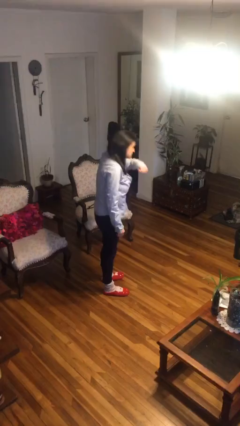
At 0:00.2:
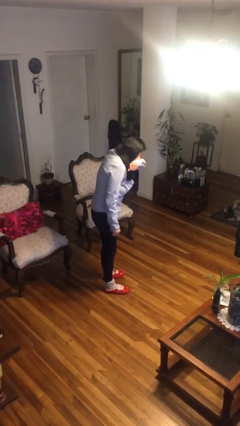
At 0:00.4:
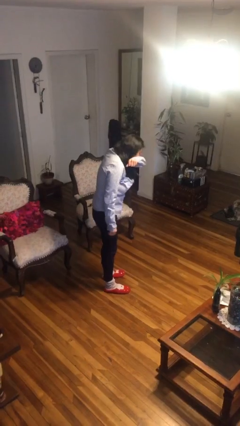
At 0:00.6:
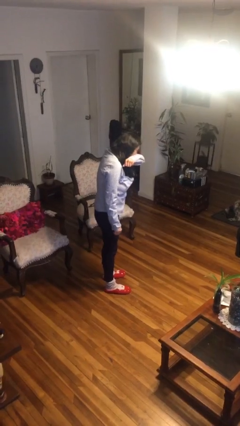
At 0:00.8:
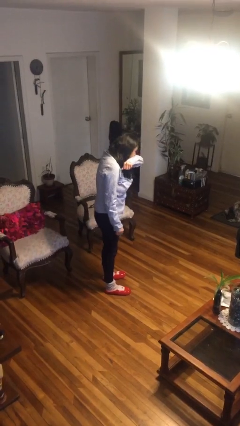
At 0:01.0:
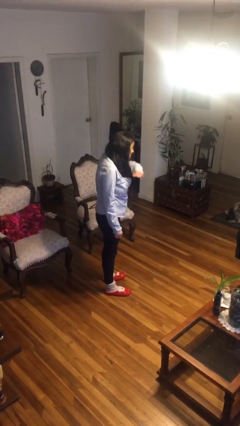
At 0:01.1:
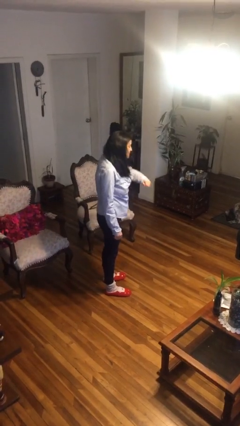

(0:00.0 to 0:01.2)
person sneezes into arm

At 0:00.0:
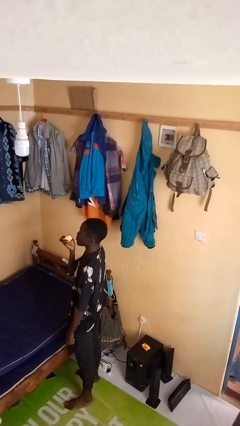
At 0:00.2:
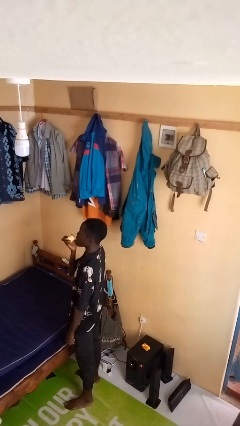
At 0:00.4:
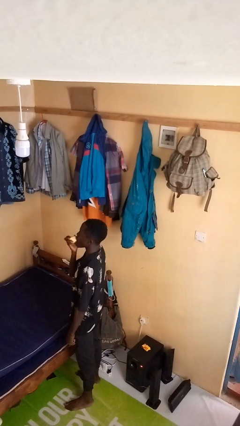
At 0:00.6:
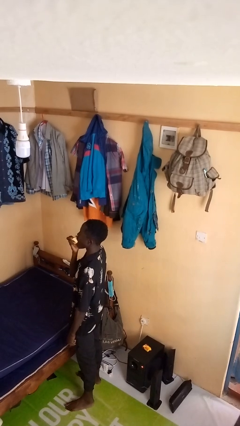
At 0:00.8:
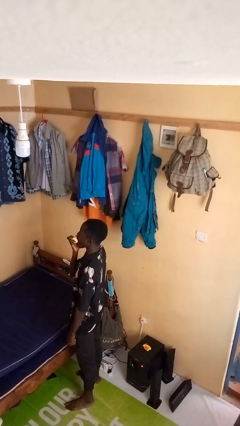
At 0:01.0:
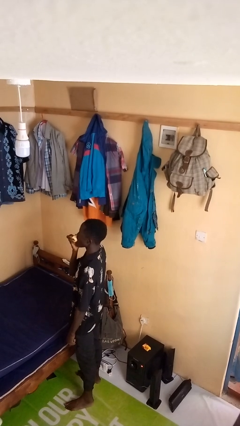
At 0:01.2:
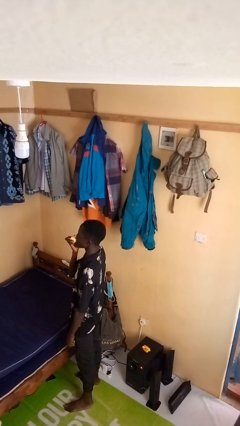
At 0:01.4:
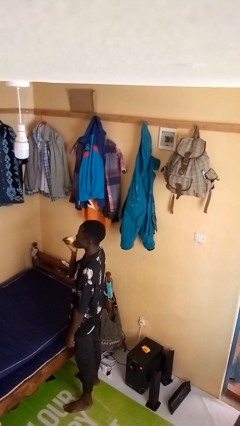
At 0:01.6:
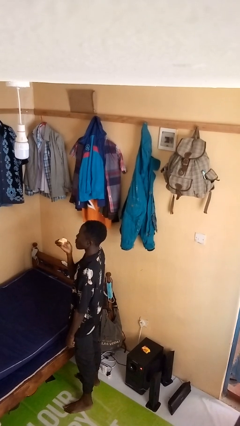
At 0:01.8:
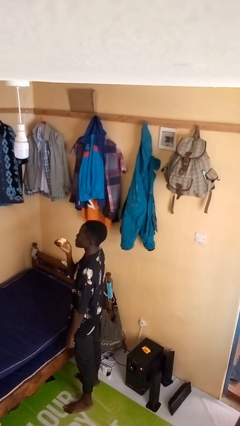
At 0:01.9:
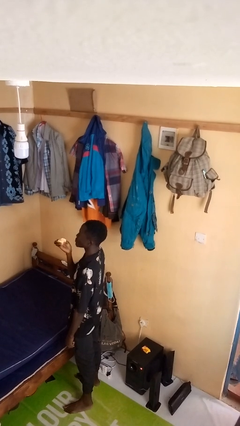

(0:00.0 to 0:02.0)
person eats apple

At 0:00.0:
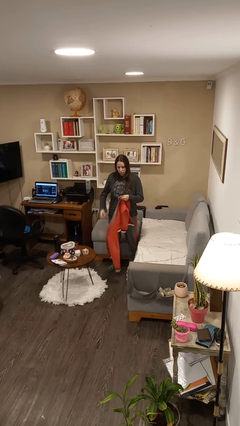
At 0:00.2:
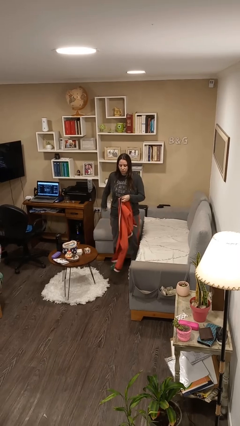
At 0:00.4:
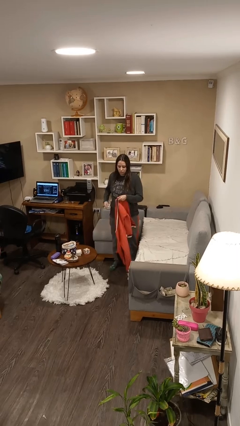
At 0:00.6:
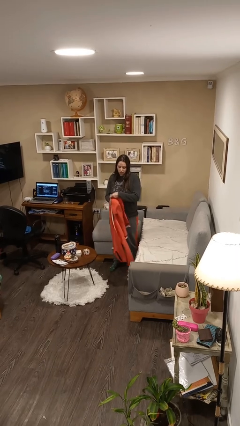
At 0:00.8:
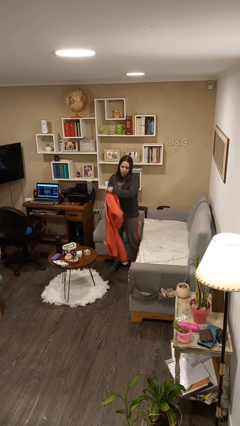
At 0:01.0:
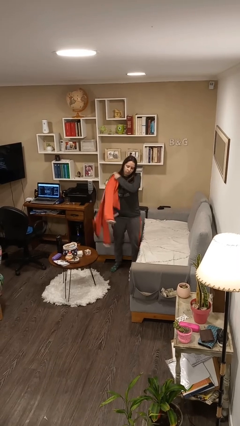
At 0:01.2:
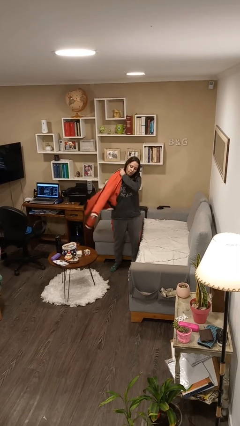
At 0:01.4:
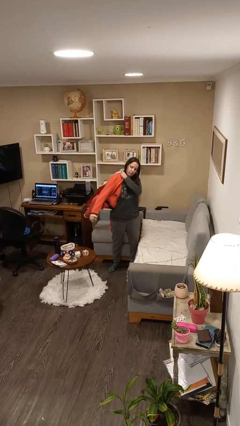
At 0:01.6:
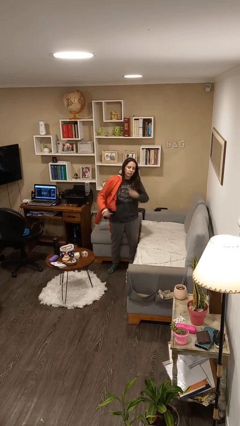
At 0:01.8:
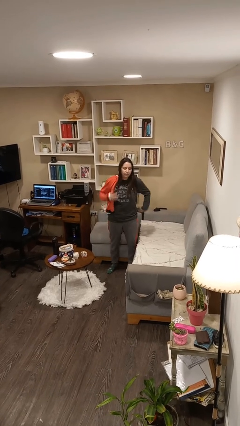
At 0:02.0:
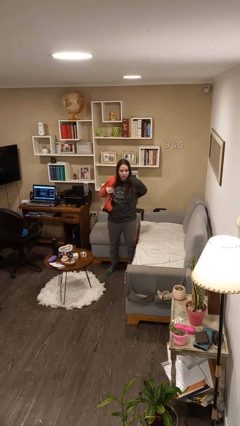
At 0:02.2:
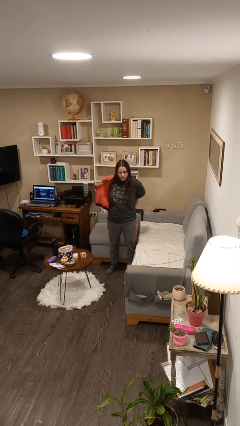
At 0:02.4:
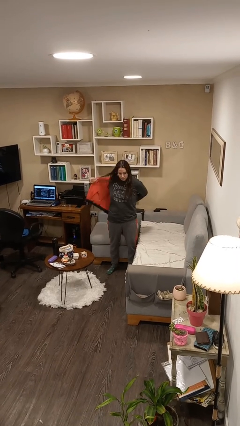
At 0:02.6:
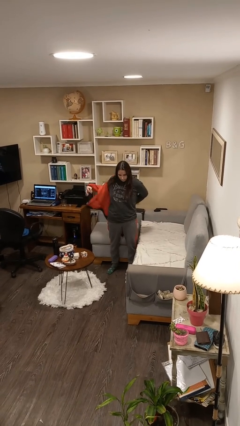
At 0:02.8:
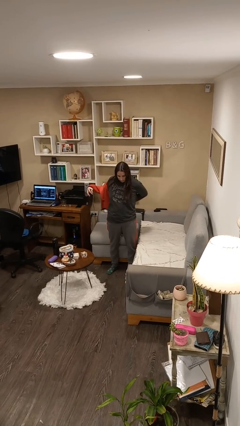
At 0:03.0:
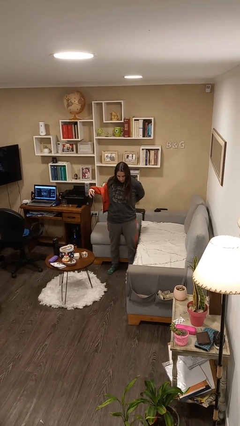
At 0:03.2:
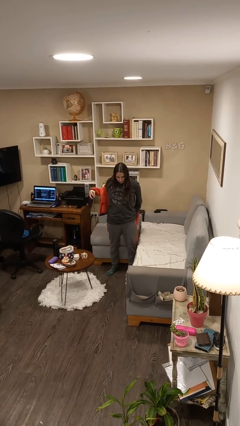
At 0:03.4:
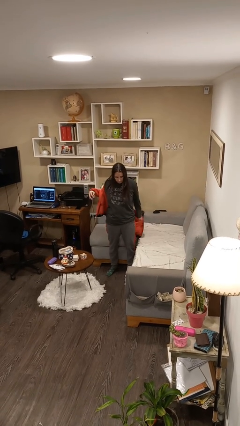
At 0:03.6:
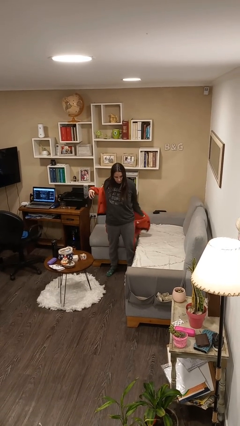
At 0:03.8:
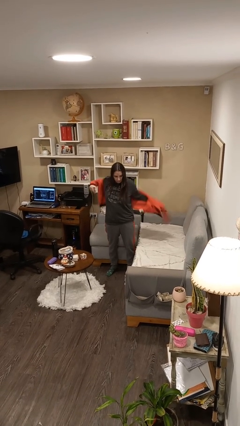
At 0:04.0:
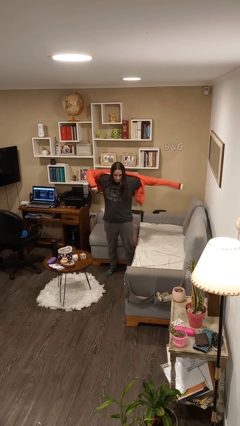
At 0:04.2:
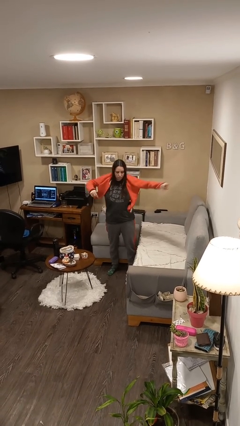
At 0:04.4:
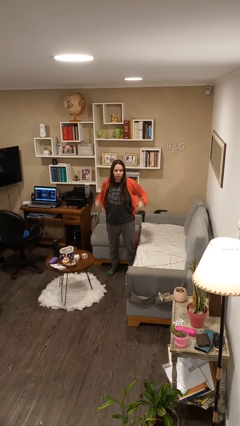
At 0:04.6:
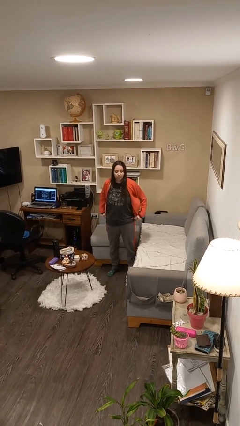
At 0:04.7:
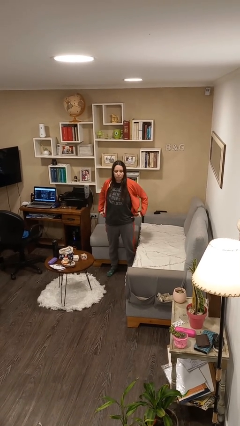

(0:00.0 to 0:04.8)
person puts on jacket

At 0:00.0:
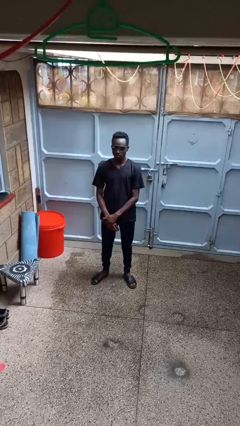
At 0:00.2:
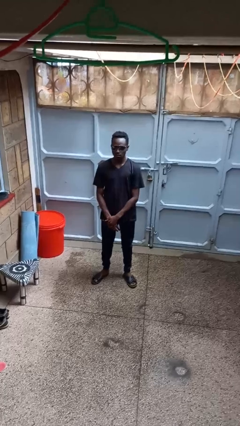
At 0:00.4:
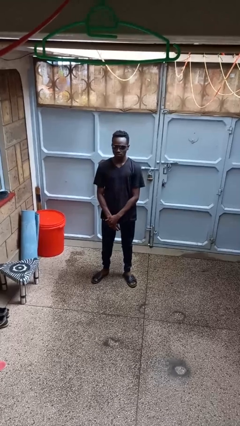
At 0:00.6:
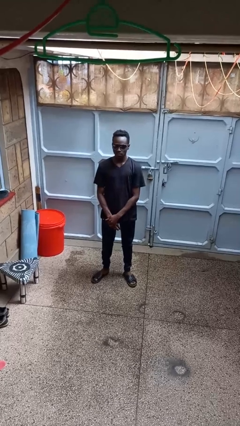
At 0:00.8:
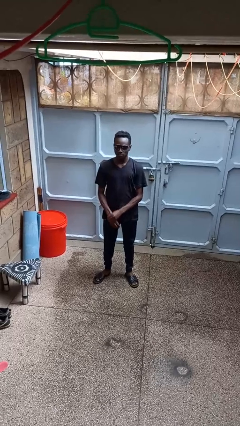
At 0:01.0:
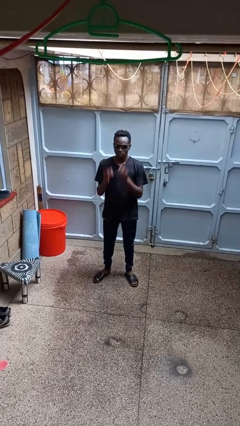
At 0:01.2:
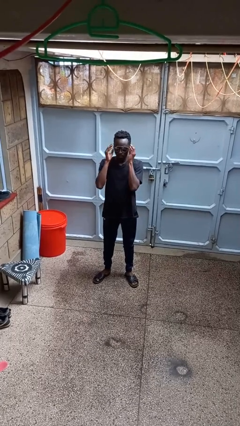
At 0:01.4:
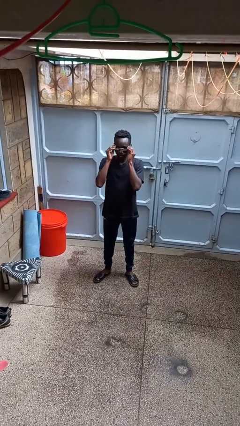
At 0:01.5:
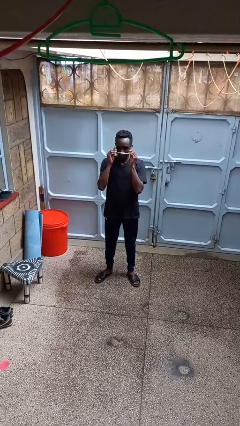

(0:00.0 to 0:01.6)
person takes off sunglasses

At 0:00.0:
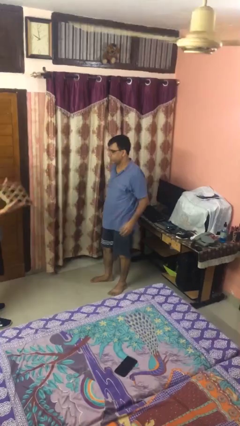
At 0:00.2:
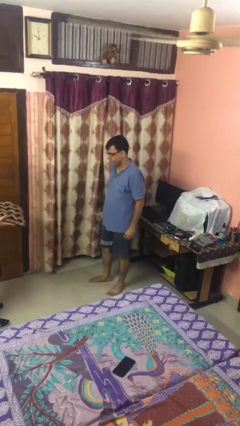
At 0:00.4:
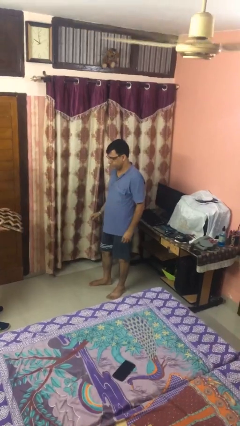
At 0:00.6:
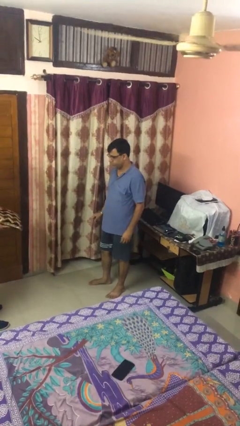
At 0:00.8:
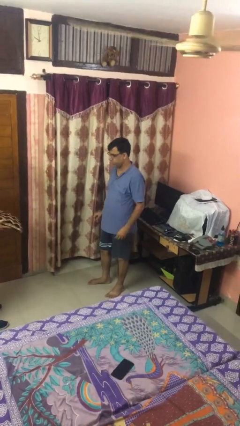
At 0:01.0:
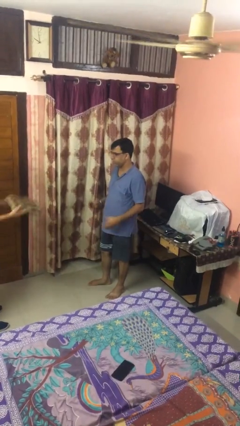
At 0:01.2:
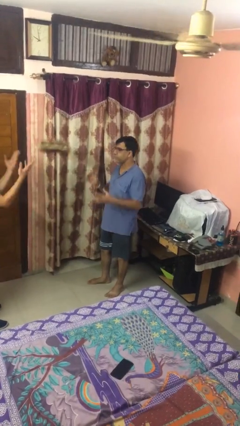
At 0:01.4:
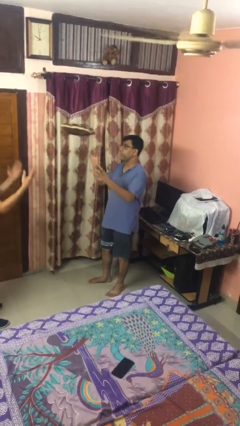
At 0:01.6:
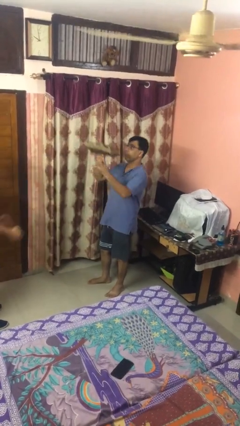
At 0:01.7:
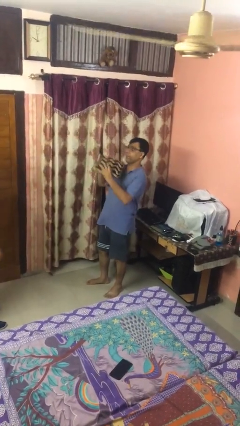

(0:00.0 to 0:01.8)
person catches object from person

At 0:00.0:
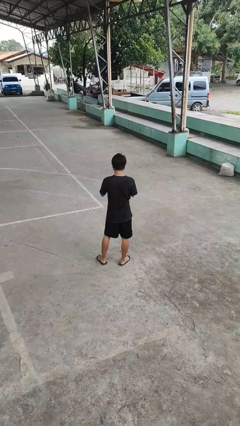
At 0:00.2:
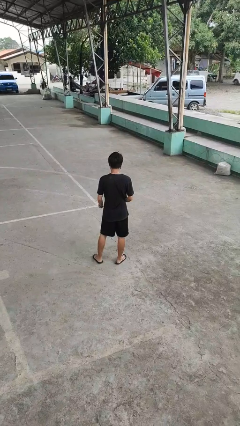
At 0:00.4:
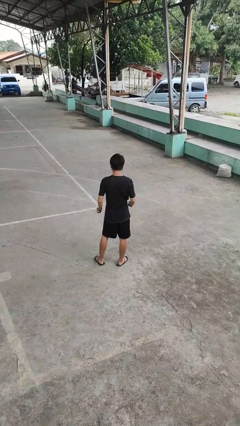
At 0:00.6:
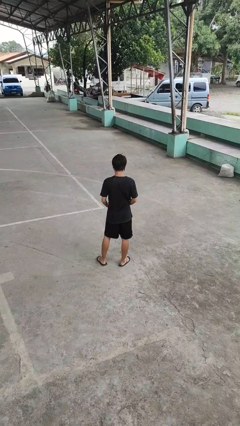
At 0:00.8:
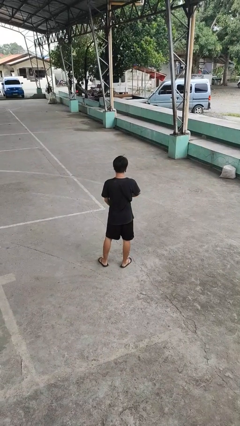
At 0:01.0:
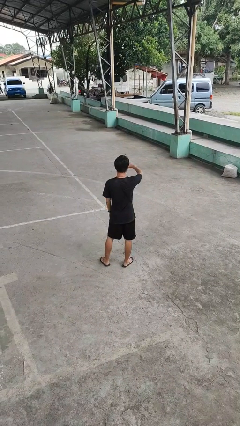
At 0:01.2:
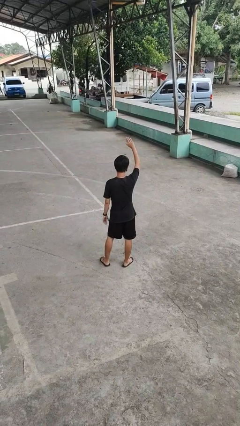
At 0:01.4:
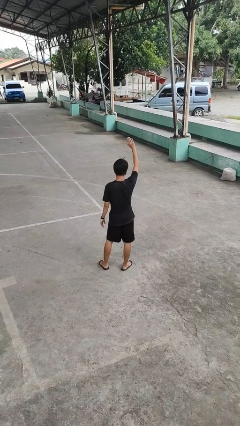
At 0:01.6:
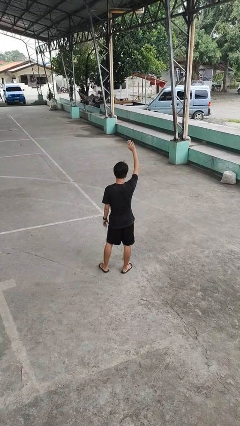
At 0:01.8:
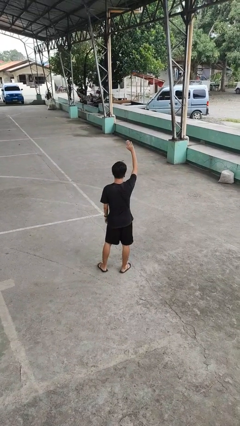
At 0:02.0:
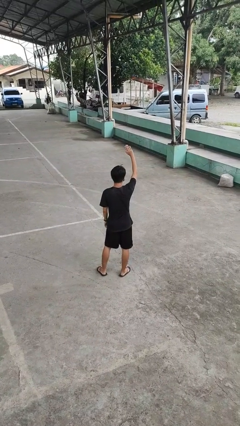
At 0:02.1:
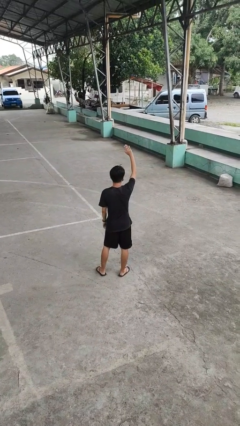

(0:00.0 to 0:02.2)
person gestures swipe up

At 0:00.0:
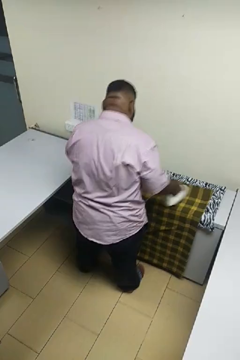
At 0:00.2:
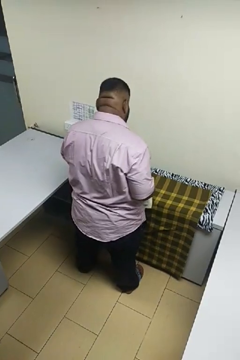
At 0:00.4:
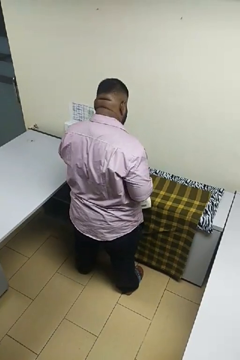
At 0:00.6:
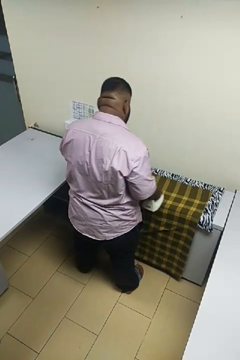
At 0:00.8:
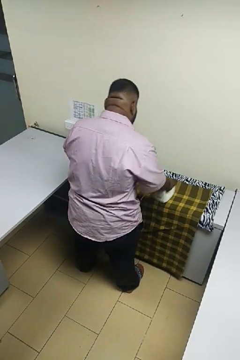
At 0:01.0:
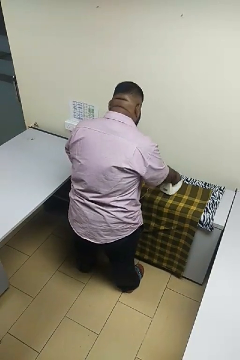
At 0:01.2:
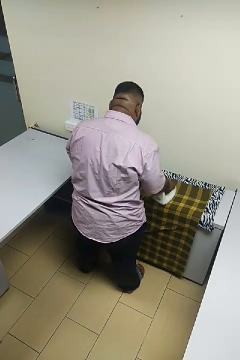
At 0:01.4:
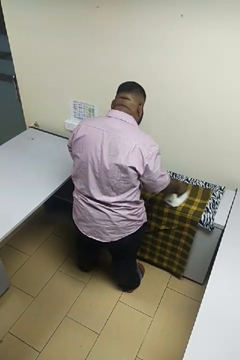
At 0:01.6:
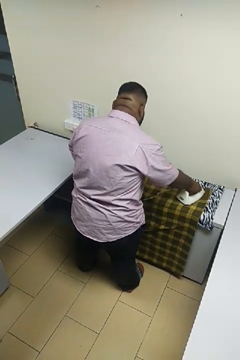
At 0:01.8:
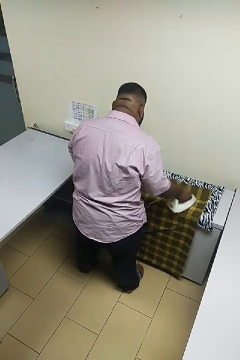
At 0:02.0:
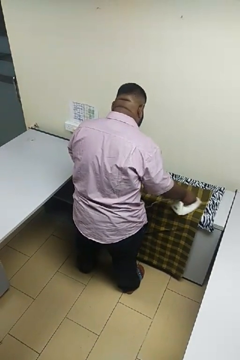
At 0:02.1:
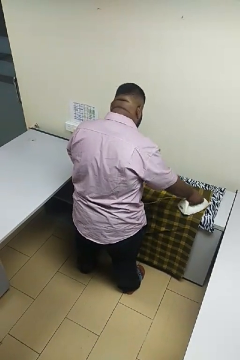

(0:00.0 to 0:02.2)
person irons clothes

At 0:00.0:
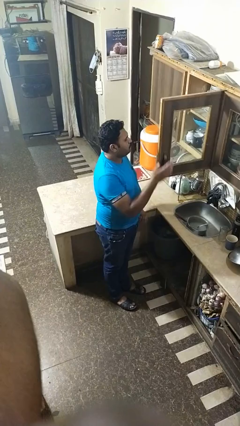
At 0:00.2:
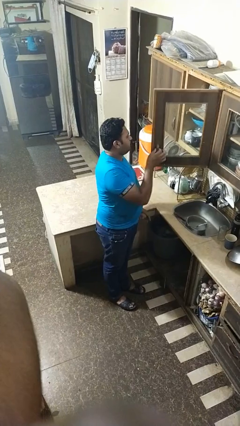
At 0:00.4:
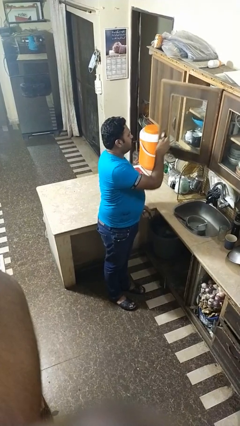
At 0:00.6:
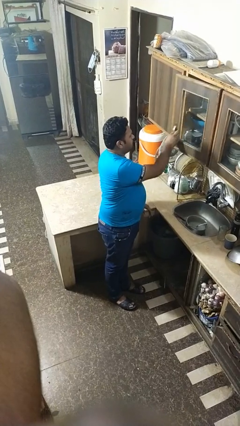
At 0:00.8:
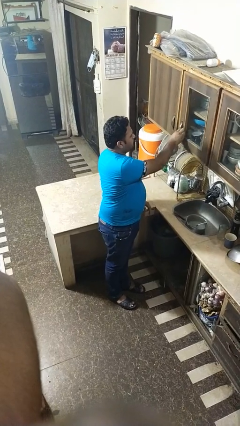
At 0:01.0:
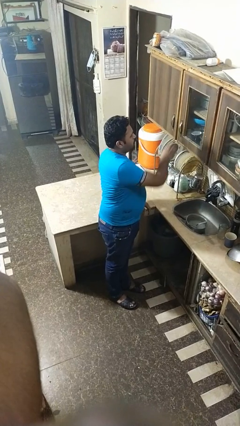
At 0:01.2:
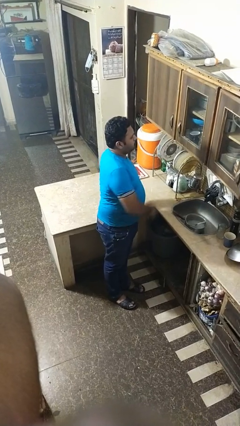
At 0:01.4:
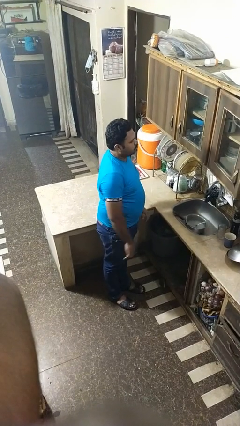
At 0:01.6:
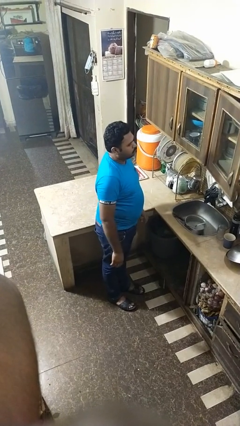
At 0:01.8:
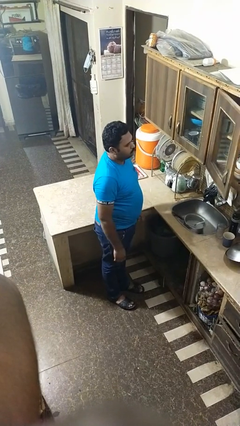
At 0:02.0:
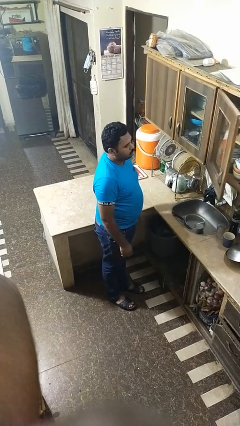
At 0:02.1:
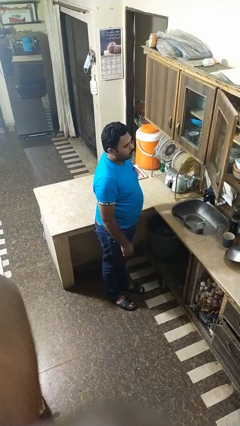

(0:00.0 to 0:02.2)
person closes cabinet
